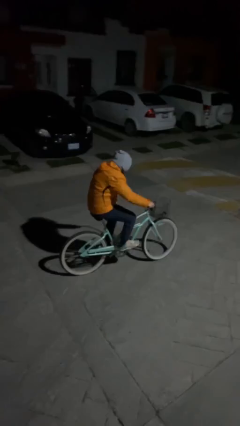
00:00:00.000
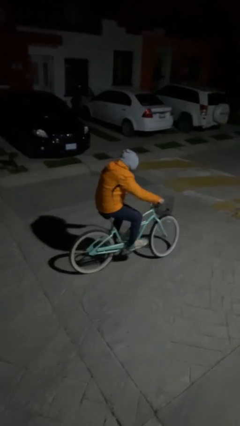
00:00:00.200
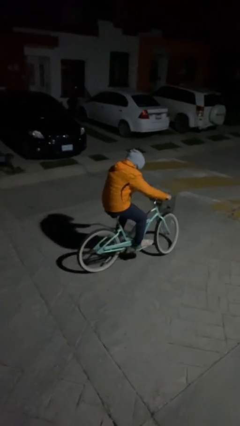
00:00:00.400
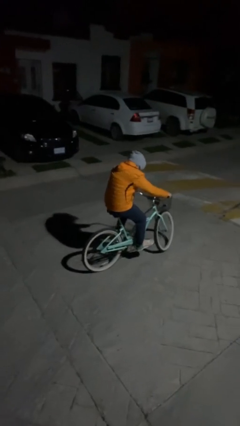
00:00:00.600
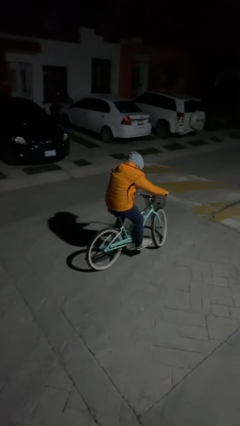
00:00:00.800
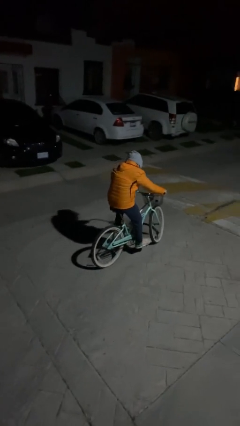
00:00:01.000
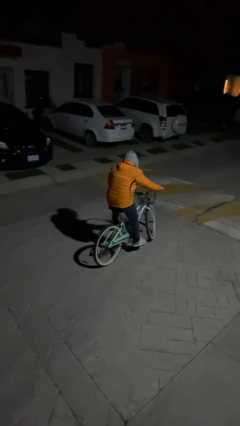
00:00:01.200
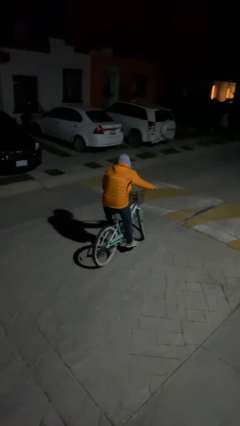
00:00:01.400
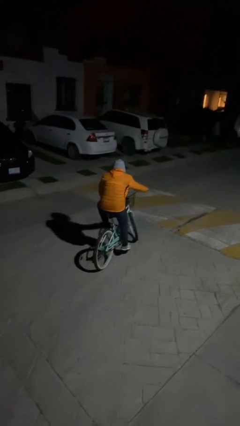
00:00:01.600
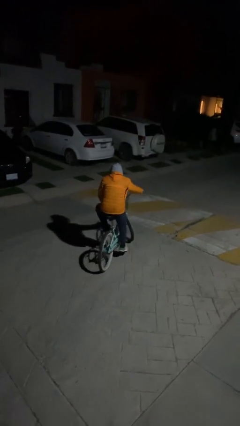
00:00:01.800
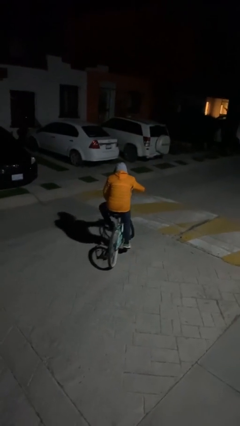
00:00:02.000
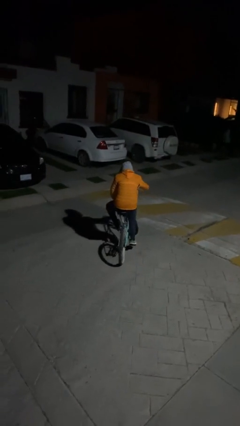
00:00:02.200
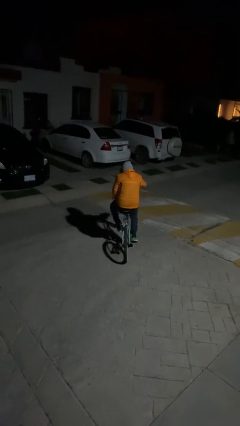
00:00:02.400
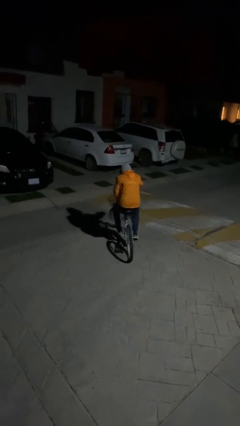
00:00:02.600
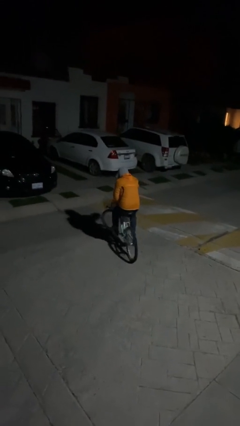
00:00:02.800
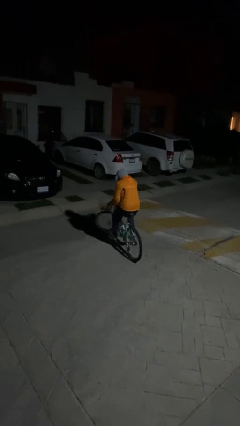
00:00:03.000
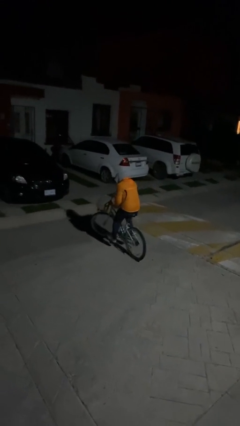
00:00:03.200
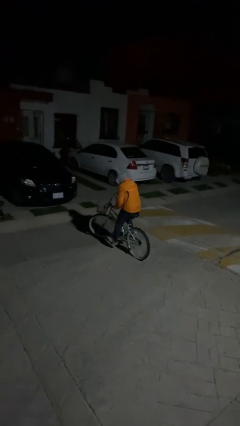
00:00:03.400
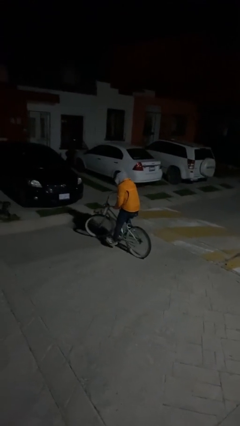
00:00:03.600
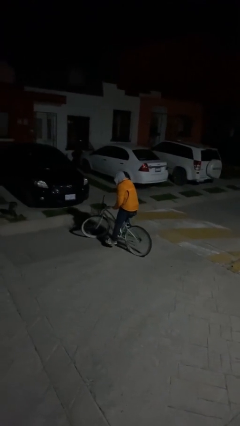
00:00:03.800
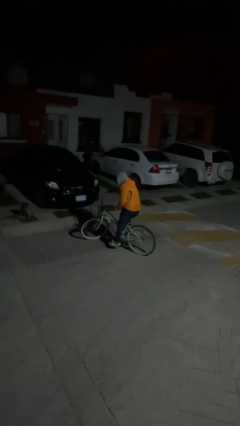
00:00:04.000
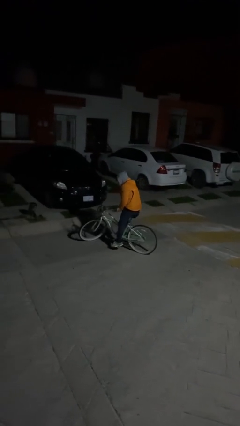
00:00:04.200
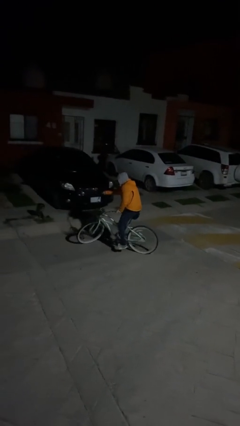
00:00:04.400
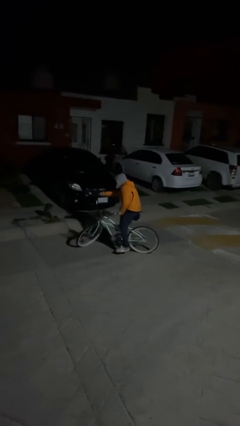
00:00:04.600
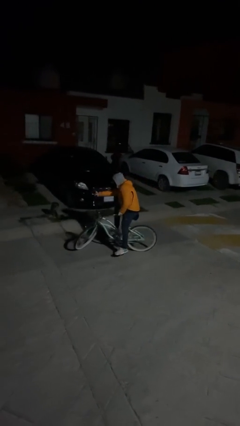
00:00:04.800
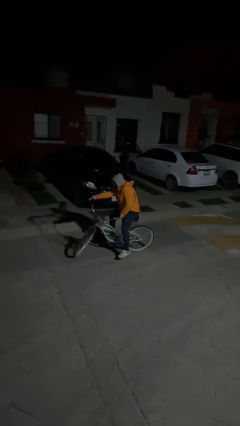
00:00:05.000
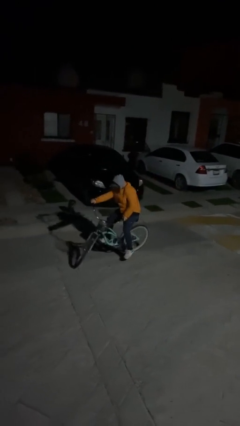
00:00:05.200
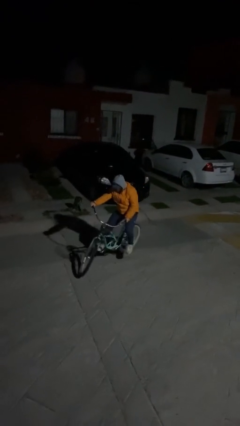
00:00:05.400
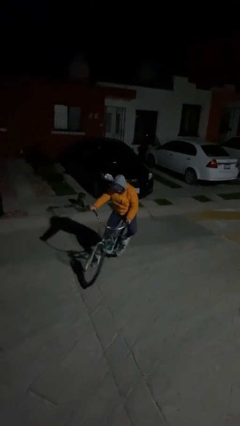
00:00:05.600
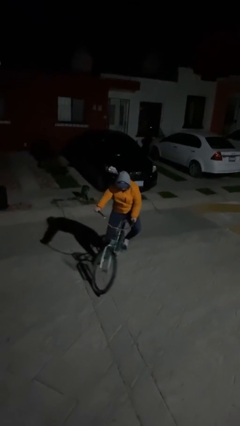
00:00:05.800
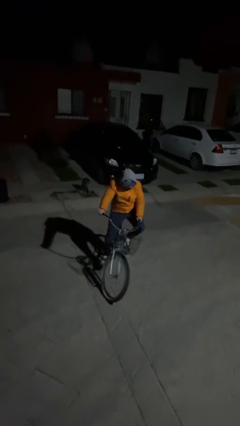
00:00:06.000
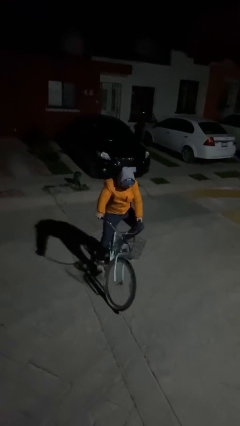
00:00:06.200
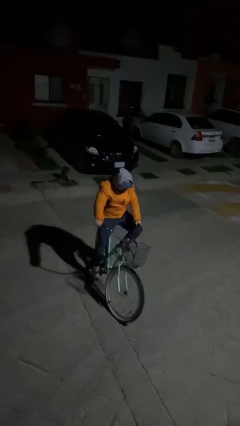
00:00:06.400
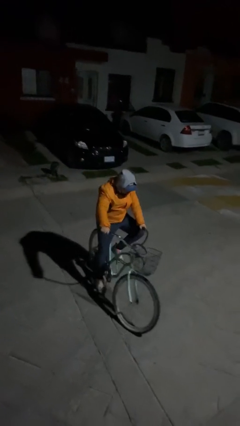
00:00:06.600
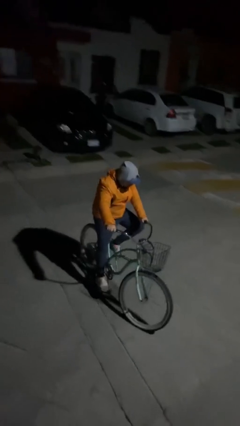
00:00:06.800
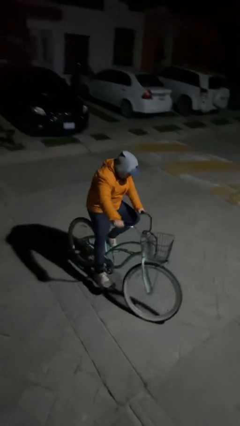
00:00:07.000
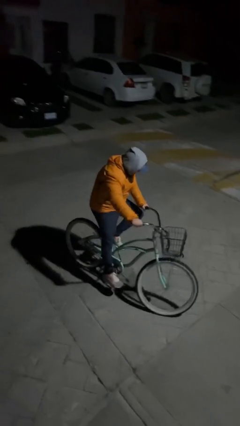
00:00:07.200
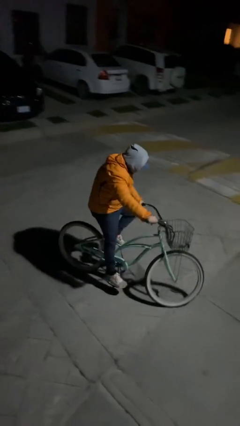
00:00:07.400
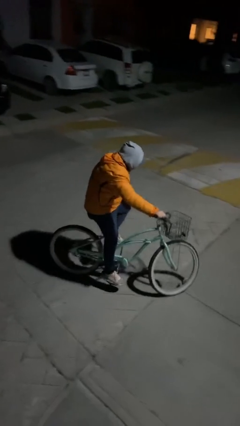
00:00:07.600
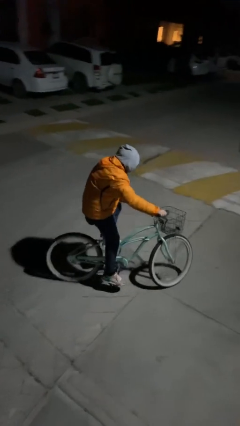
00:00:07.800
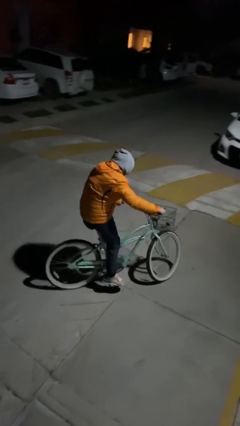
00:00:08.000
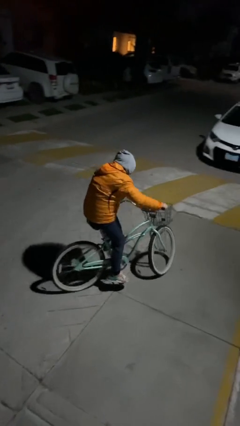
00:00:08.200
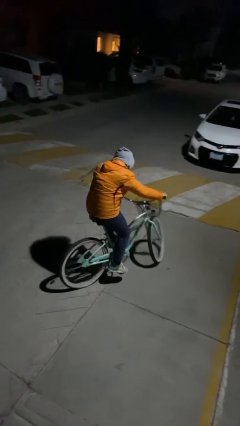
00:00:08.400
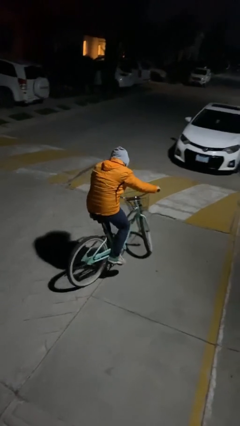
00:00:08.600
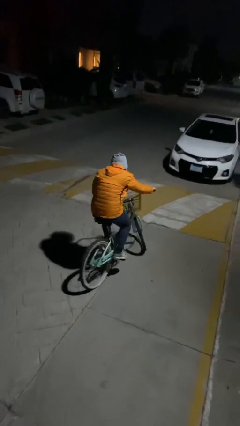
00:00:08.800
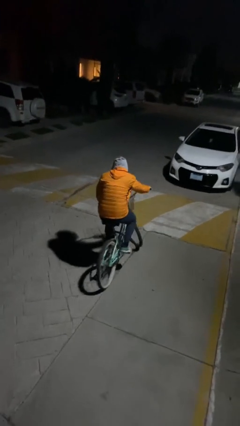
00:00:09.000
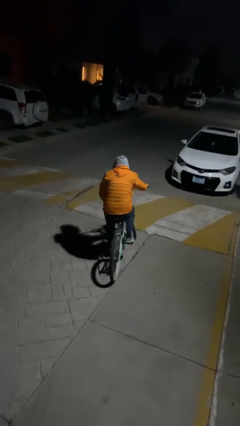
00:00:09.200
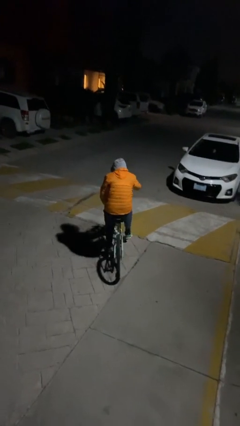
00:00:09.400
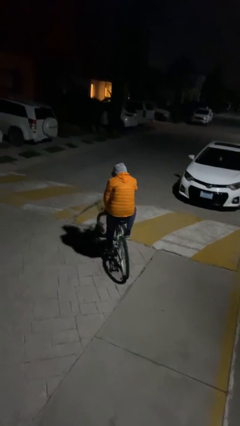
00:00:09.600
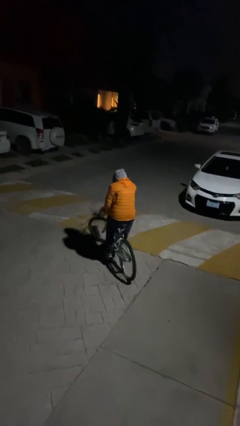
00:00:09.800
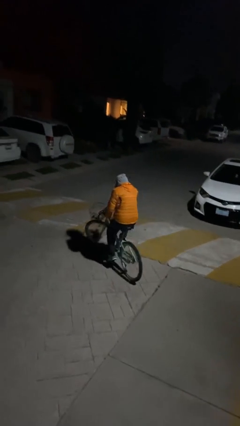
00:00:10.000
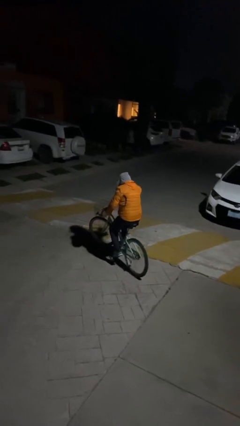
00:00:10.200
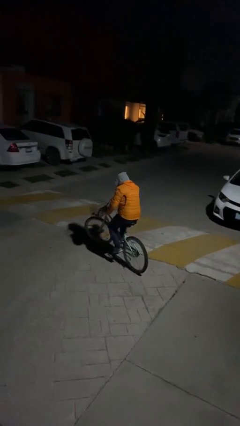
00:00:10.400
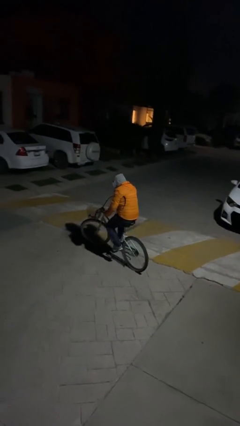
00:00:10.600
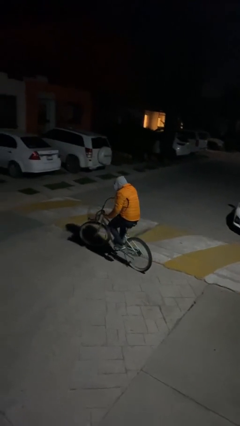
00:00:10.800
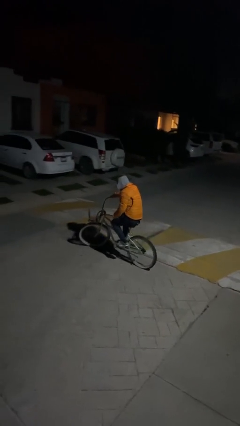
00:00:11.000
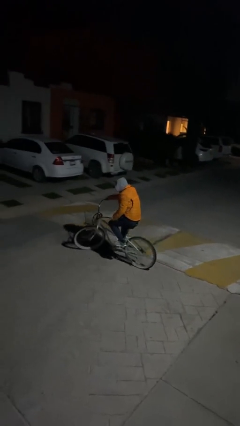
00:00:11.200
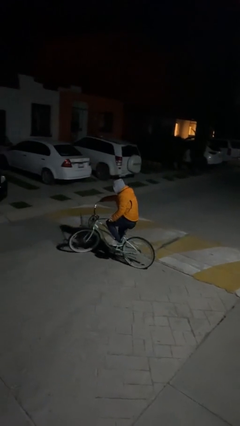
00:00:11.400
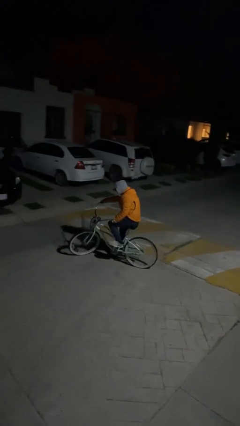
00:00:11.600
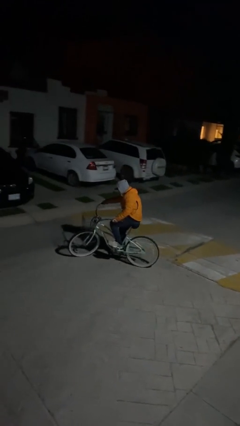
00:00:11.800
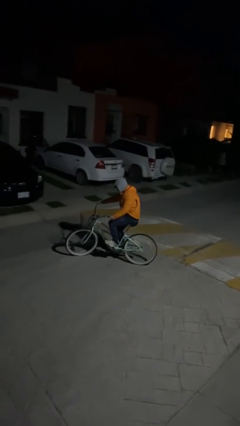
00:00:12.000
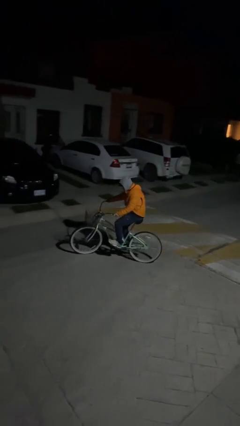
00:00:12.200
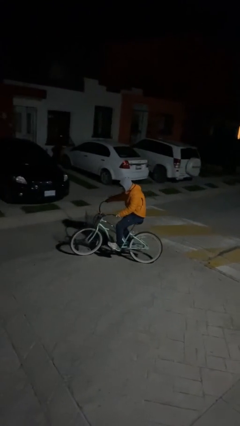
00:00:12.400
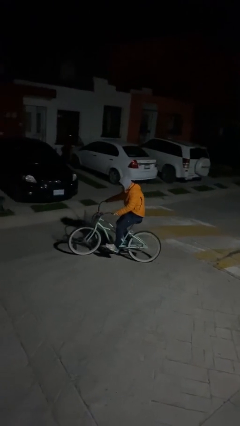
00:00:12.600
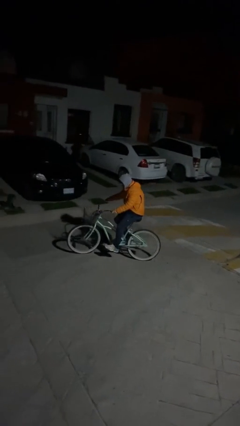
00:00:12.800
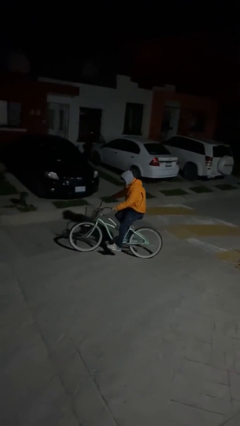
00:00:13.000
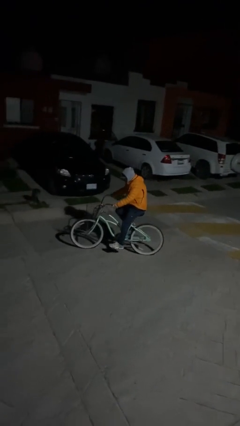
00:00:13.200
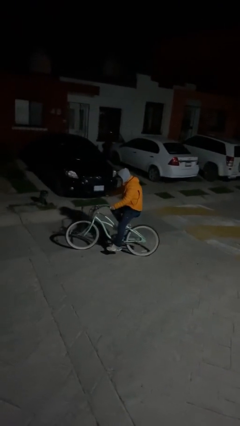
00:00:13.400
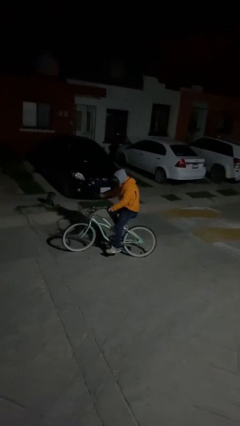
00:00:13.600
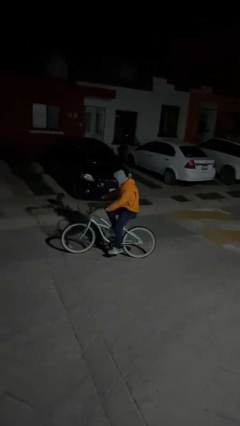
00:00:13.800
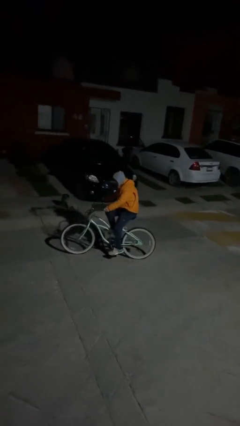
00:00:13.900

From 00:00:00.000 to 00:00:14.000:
person rides bicycle

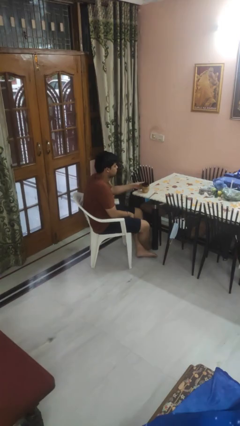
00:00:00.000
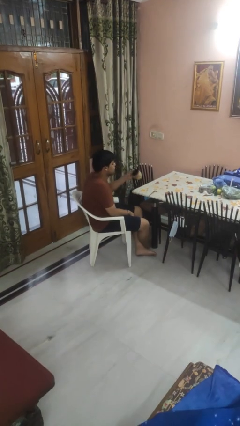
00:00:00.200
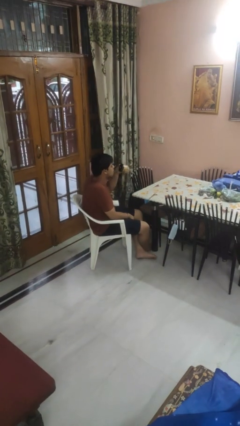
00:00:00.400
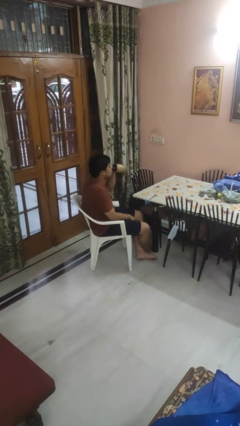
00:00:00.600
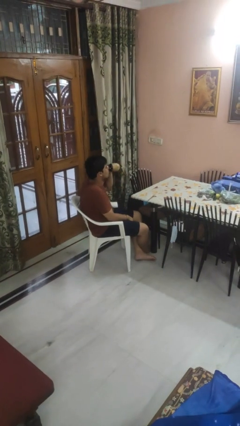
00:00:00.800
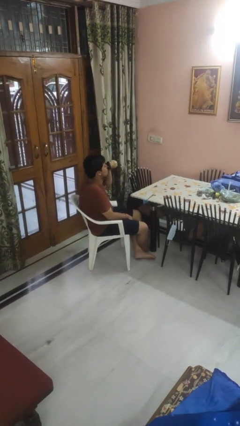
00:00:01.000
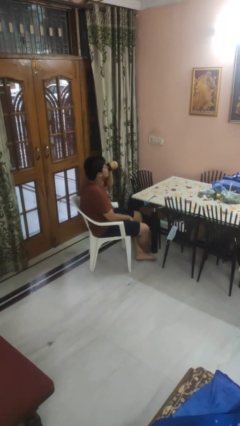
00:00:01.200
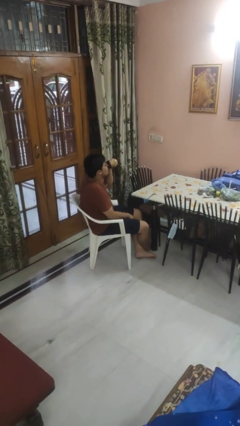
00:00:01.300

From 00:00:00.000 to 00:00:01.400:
person drinks from mug

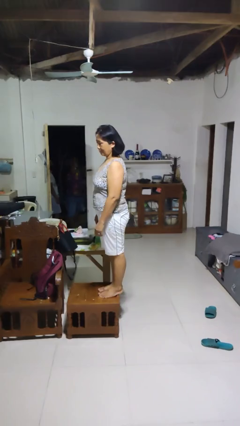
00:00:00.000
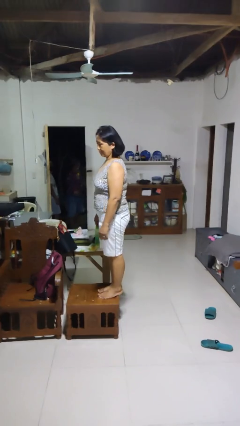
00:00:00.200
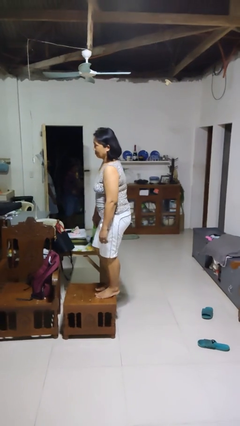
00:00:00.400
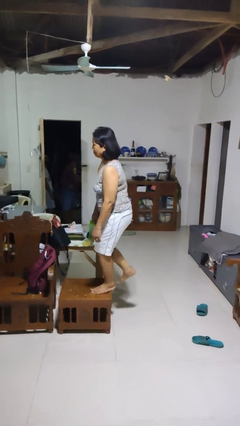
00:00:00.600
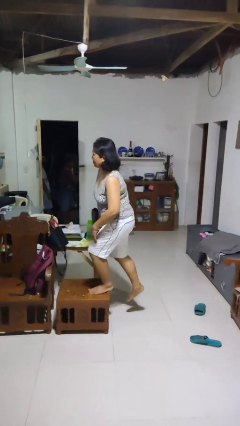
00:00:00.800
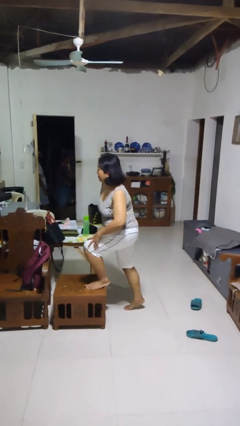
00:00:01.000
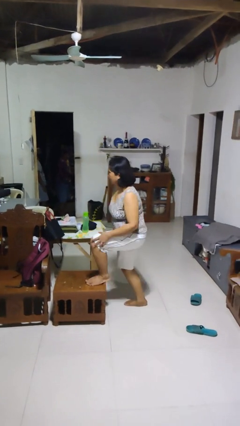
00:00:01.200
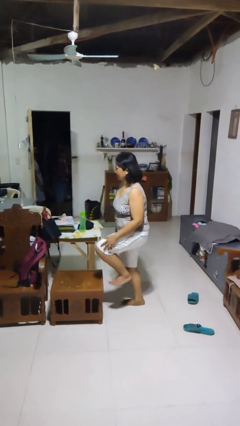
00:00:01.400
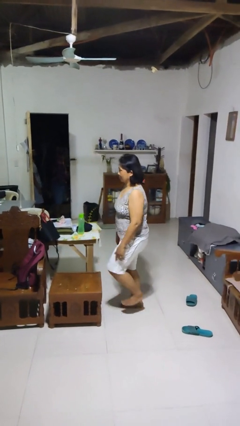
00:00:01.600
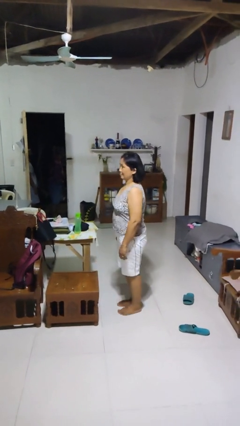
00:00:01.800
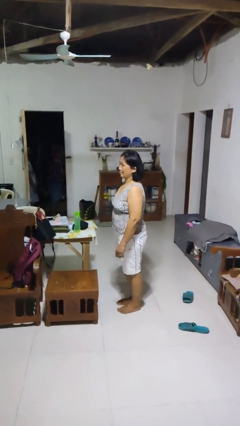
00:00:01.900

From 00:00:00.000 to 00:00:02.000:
person climbs off chair

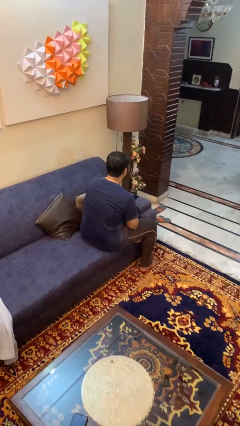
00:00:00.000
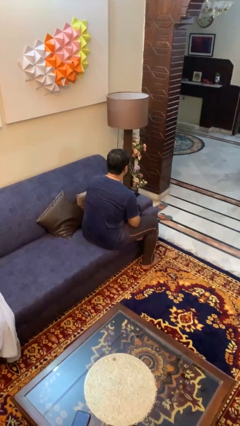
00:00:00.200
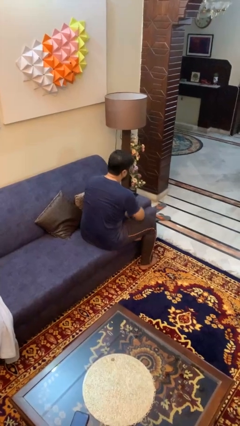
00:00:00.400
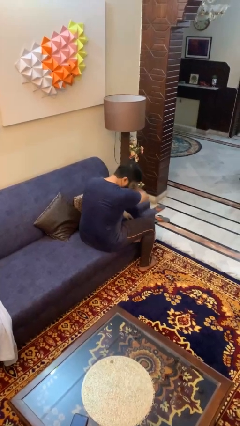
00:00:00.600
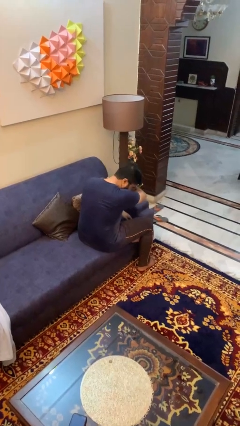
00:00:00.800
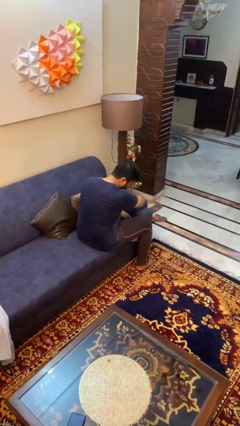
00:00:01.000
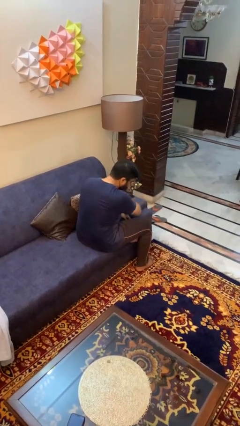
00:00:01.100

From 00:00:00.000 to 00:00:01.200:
person sneezes into arm
